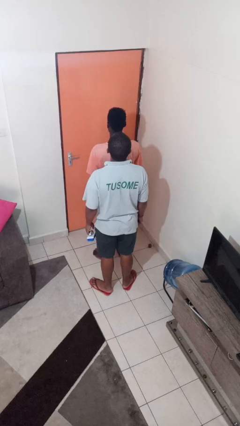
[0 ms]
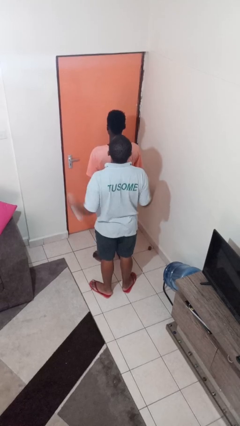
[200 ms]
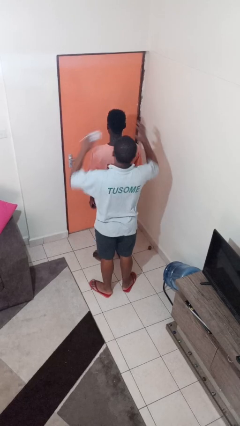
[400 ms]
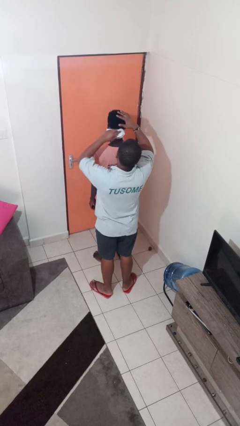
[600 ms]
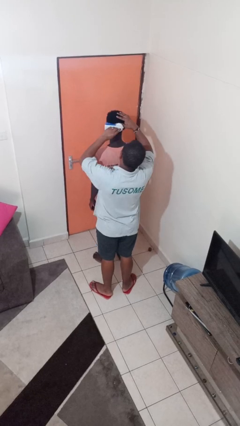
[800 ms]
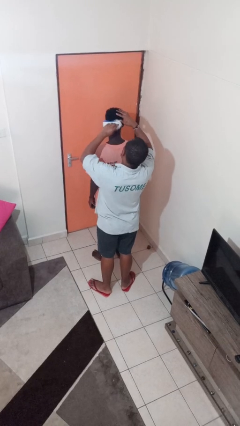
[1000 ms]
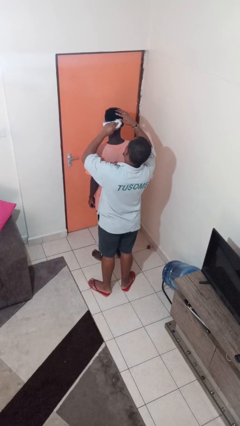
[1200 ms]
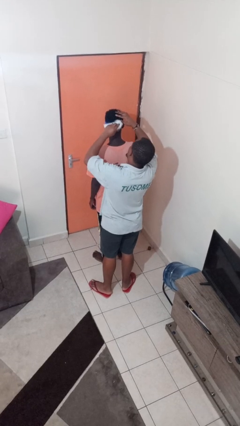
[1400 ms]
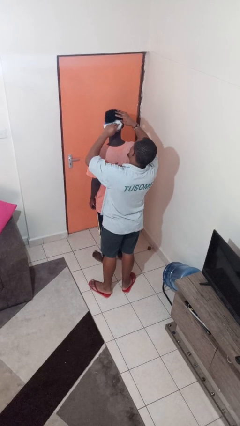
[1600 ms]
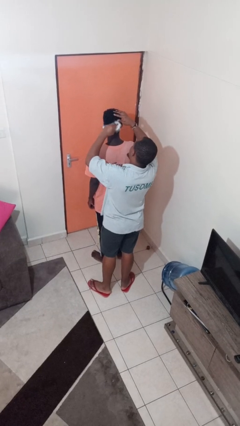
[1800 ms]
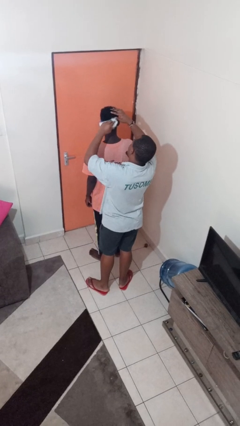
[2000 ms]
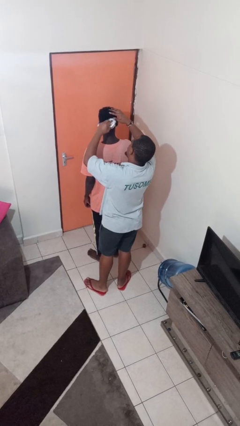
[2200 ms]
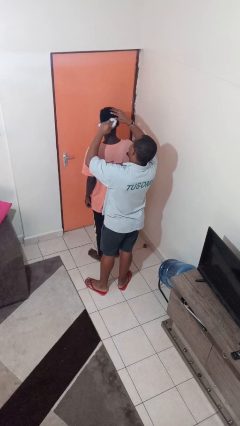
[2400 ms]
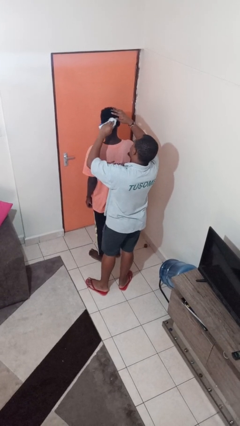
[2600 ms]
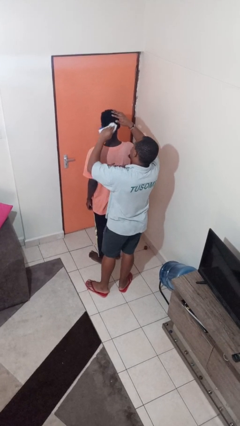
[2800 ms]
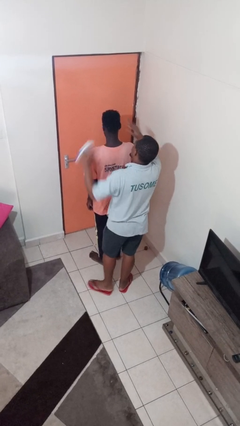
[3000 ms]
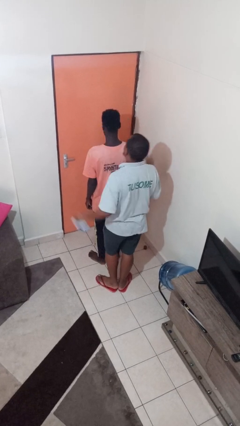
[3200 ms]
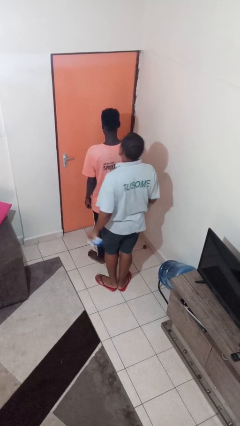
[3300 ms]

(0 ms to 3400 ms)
person brushes hair of person

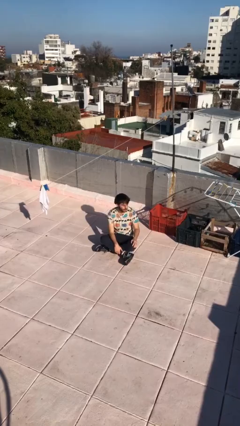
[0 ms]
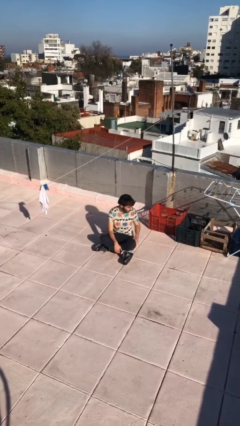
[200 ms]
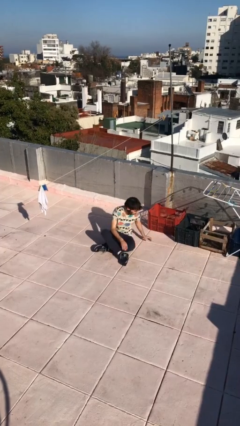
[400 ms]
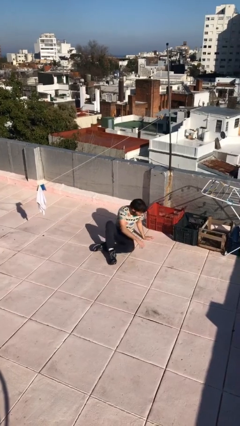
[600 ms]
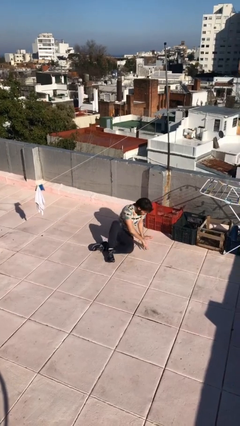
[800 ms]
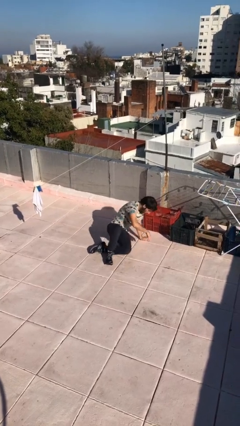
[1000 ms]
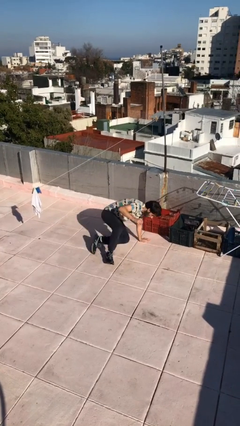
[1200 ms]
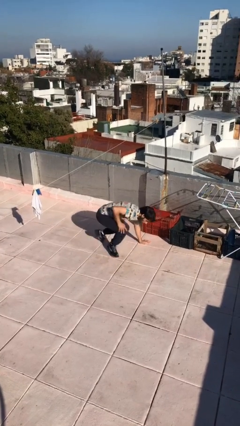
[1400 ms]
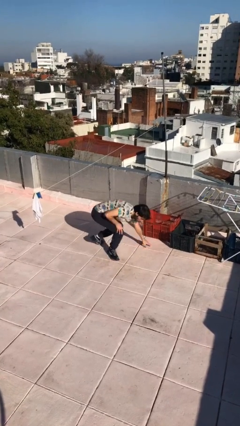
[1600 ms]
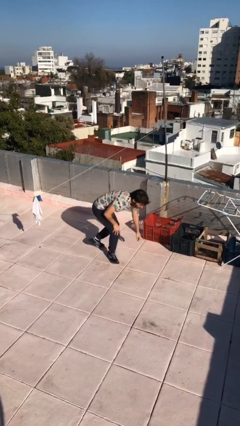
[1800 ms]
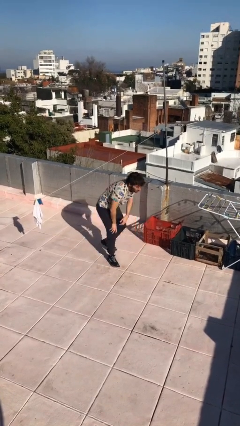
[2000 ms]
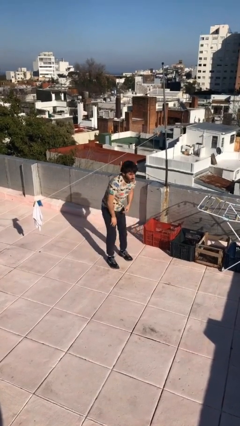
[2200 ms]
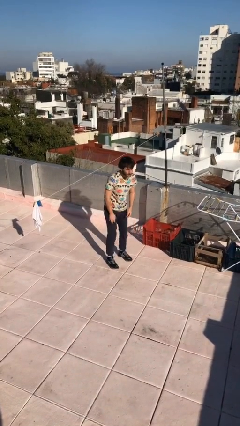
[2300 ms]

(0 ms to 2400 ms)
person stands up from floor

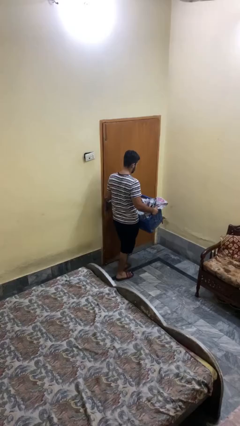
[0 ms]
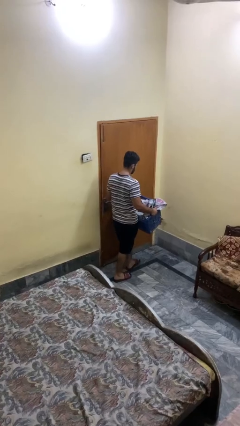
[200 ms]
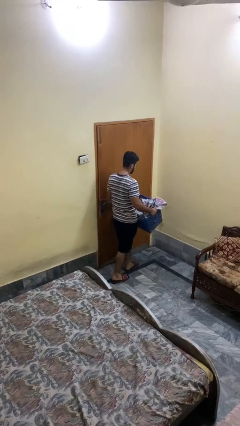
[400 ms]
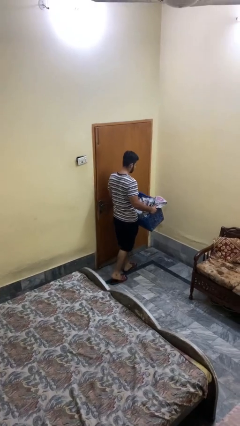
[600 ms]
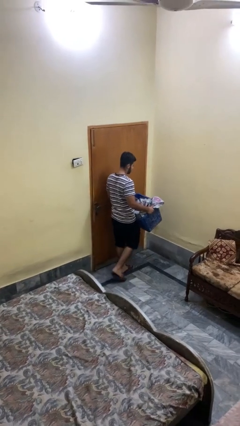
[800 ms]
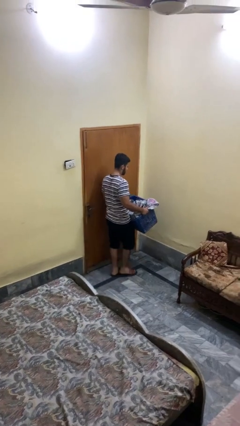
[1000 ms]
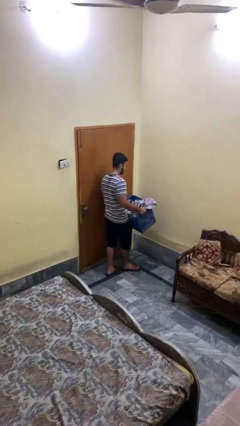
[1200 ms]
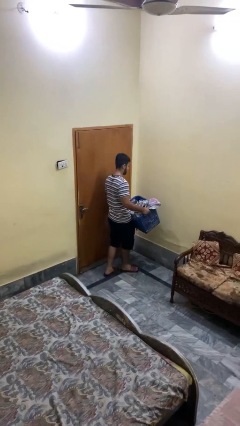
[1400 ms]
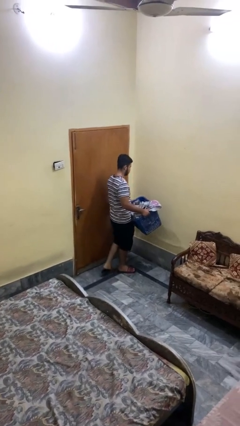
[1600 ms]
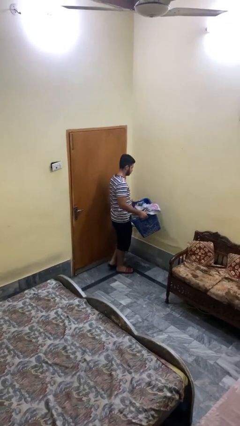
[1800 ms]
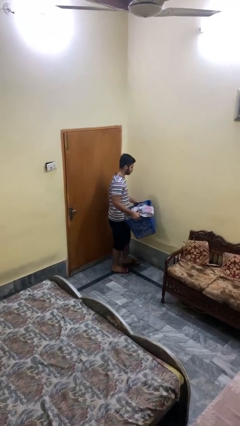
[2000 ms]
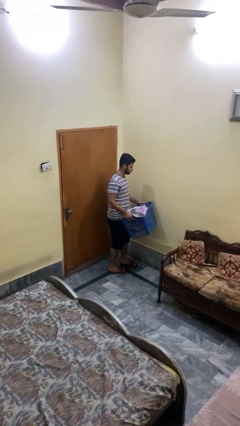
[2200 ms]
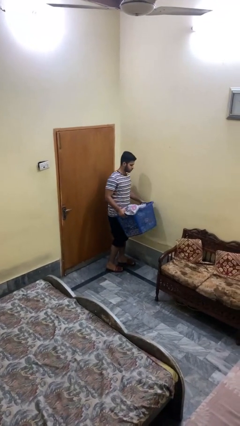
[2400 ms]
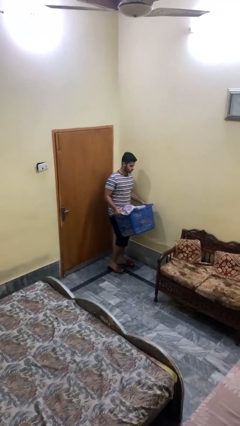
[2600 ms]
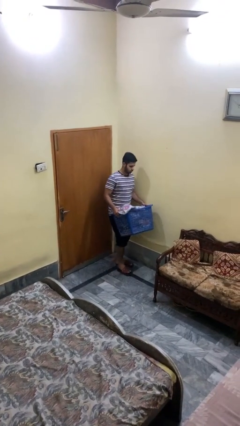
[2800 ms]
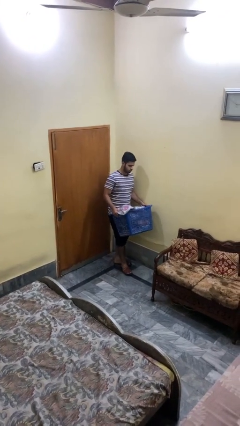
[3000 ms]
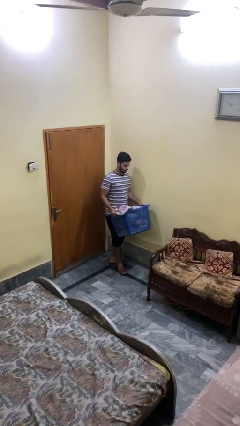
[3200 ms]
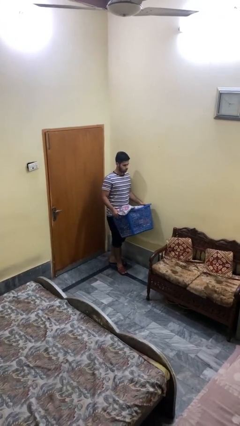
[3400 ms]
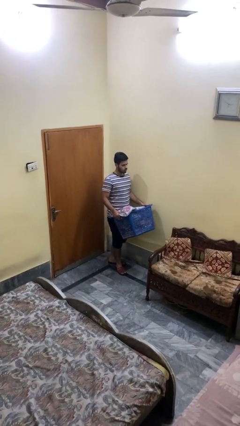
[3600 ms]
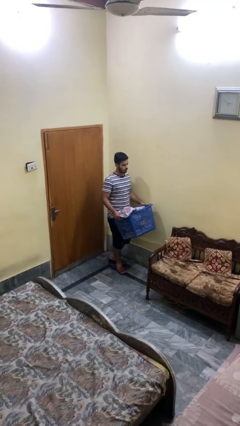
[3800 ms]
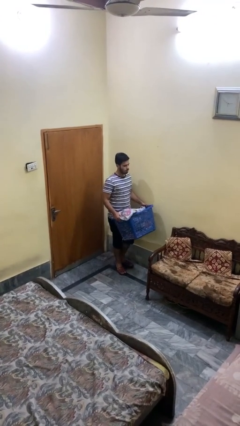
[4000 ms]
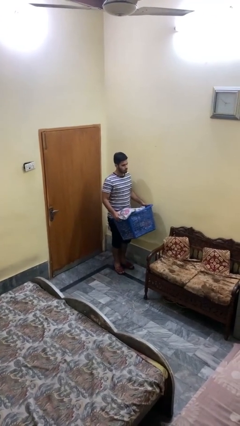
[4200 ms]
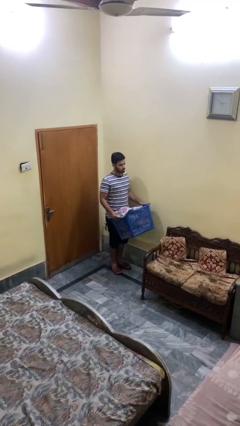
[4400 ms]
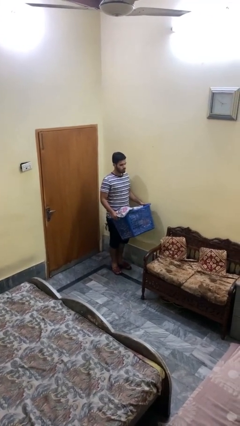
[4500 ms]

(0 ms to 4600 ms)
person carries laundry basket

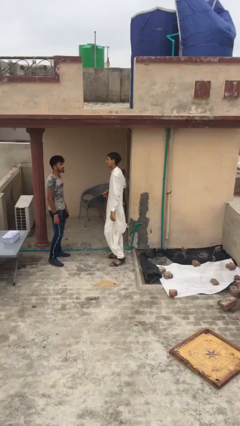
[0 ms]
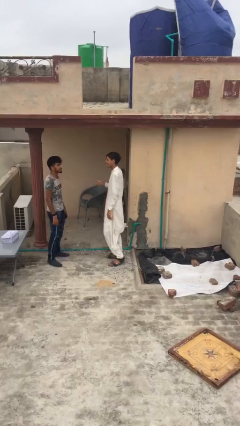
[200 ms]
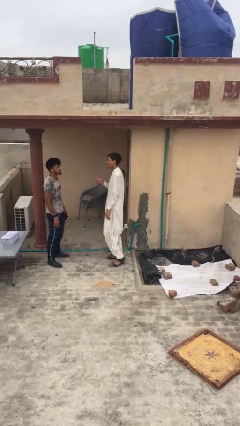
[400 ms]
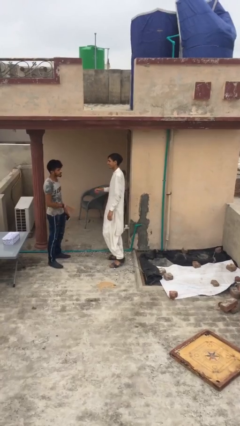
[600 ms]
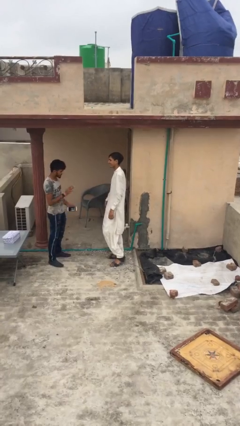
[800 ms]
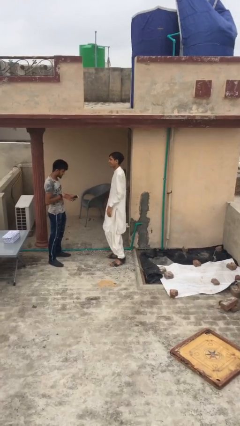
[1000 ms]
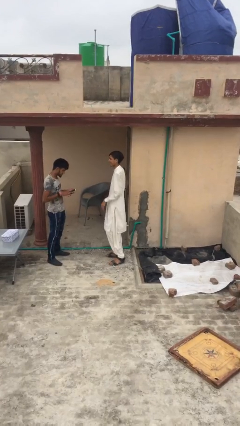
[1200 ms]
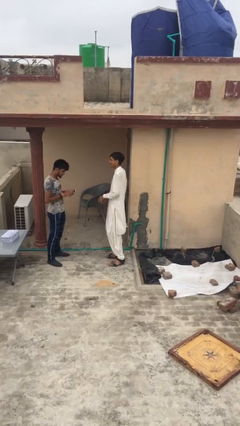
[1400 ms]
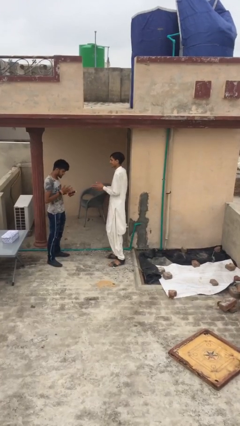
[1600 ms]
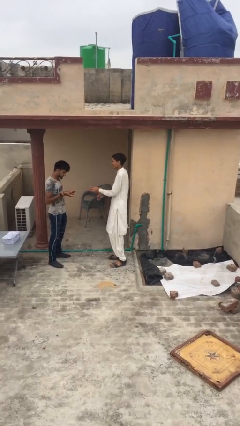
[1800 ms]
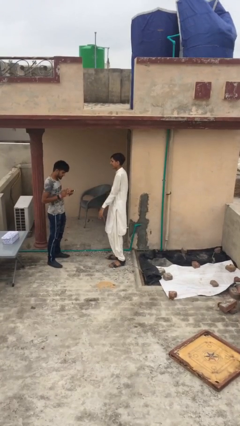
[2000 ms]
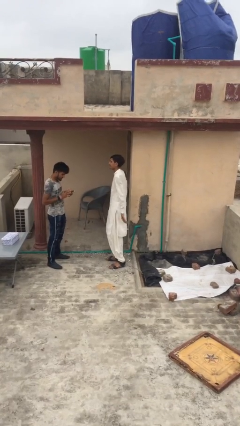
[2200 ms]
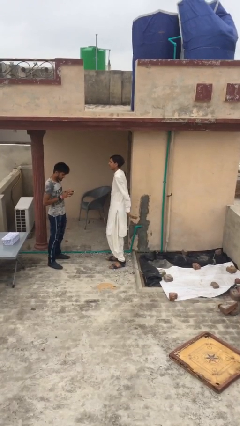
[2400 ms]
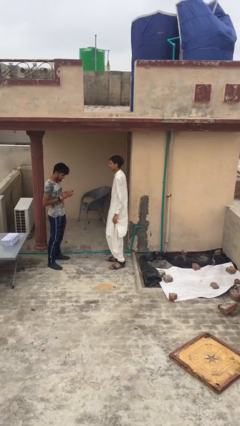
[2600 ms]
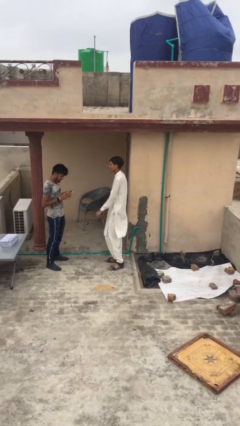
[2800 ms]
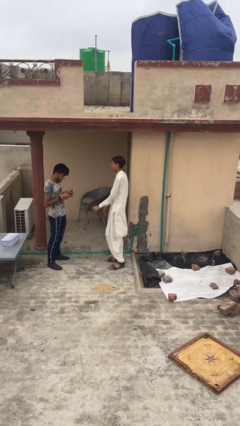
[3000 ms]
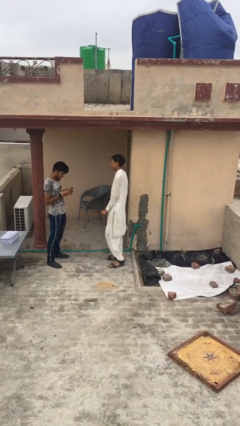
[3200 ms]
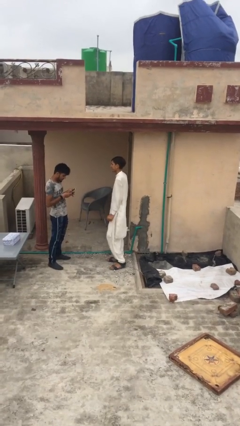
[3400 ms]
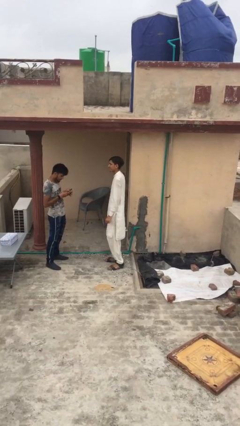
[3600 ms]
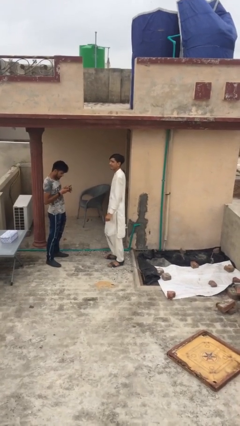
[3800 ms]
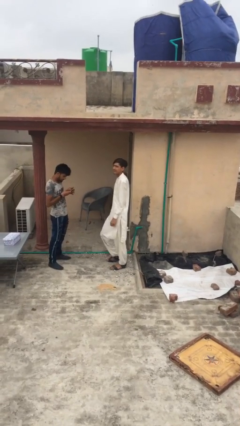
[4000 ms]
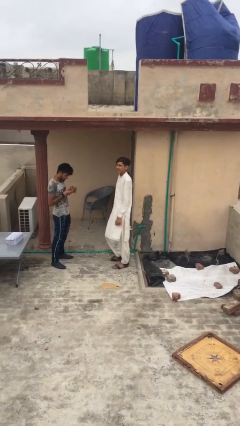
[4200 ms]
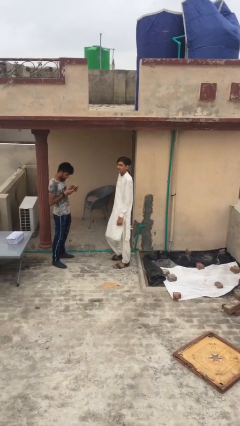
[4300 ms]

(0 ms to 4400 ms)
person talks to person

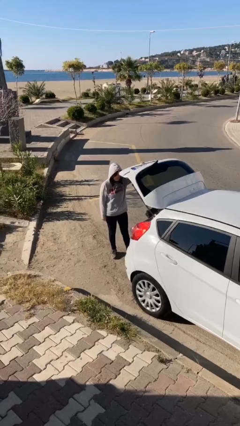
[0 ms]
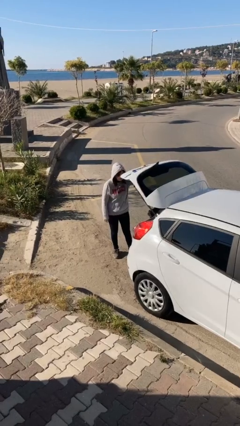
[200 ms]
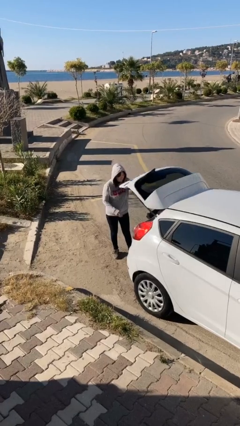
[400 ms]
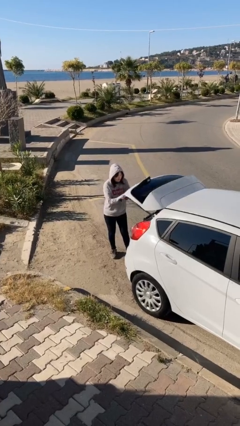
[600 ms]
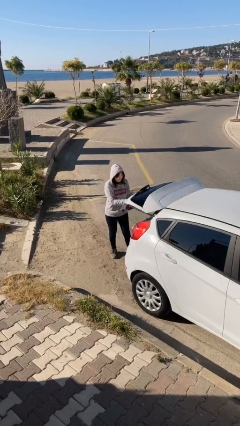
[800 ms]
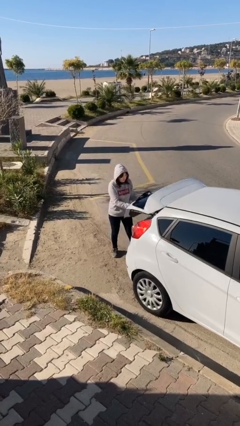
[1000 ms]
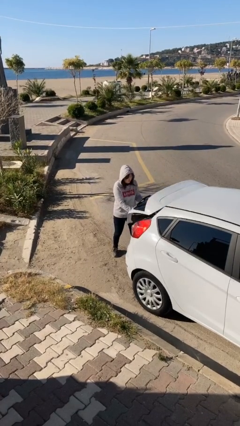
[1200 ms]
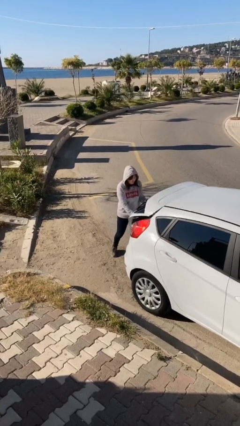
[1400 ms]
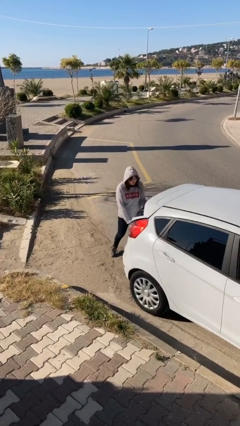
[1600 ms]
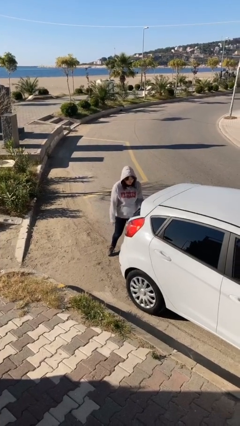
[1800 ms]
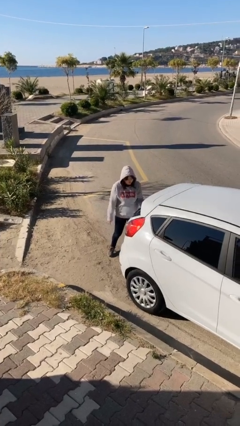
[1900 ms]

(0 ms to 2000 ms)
person closes car trunk

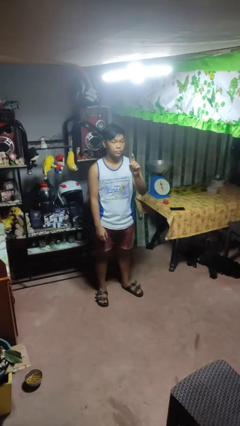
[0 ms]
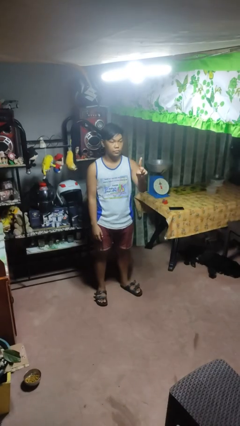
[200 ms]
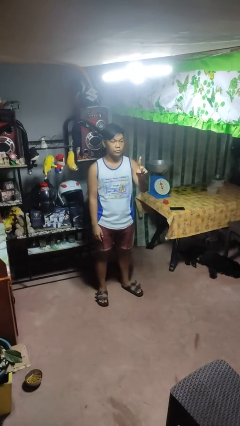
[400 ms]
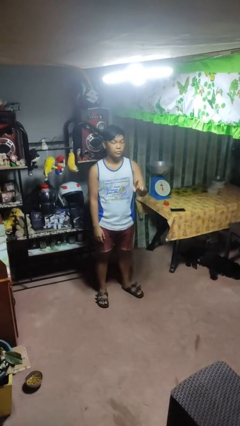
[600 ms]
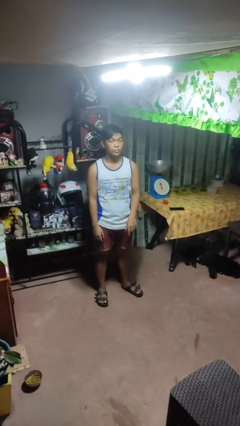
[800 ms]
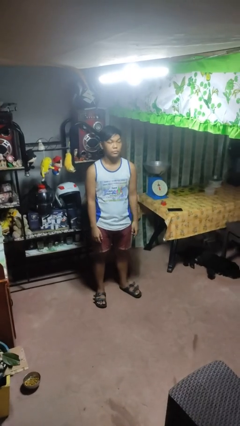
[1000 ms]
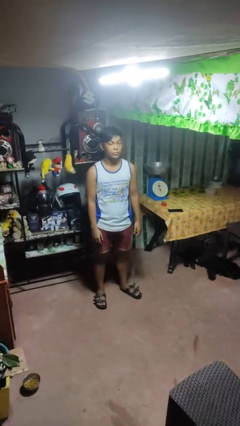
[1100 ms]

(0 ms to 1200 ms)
person gestures number one
